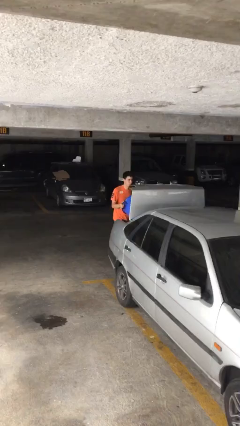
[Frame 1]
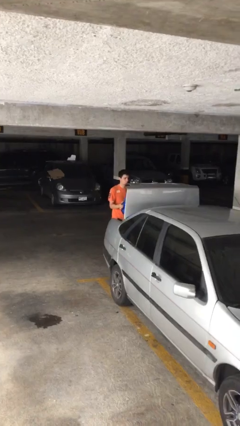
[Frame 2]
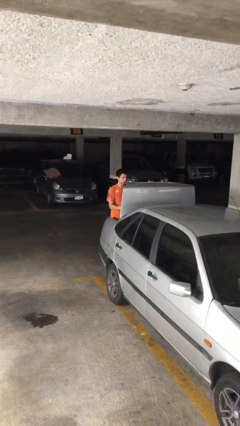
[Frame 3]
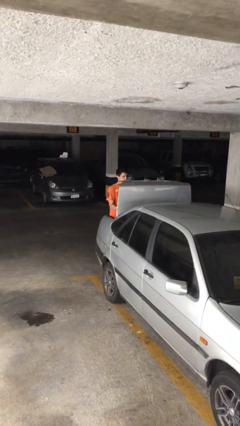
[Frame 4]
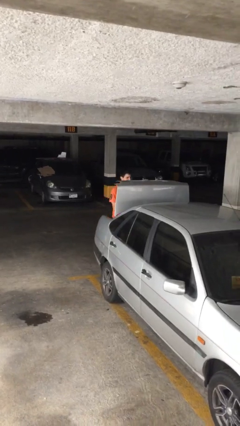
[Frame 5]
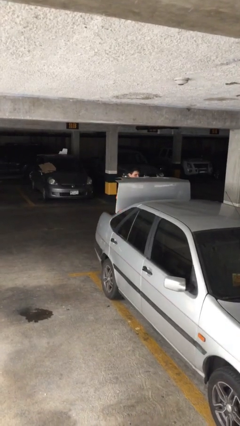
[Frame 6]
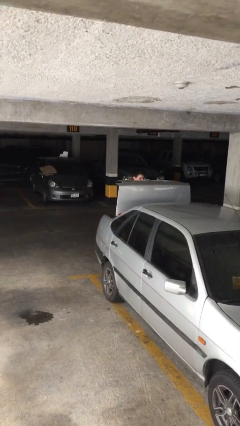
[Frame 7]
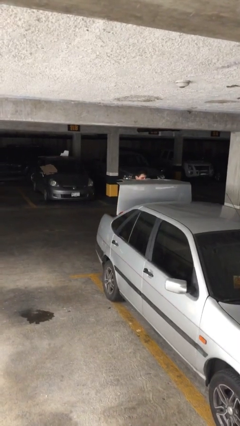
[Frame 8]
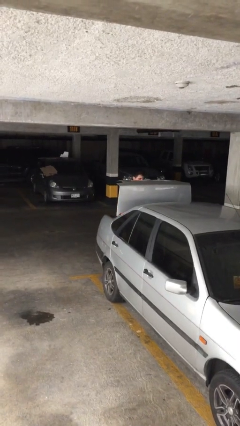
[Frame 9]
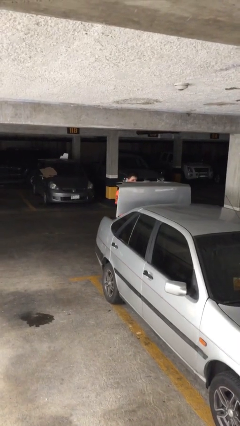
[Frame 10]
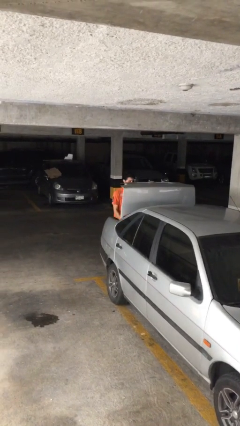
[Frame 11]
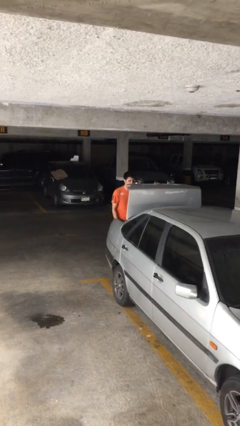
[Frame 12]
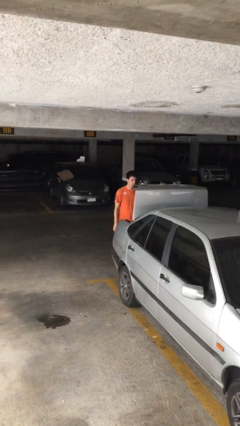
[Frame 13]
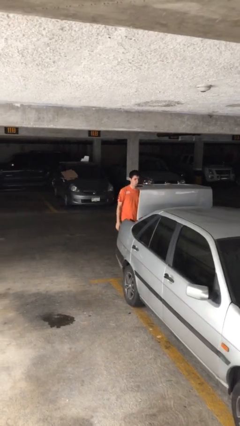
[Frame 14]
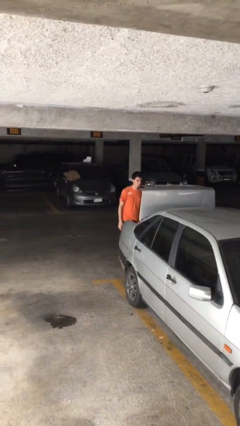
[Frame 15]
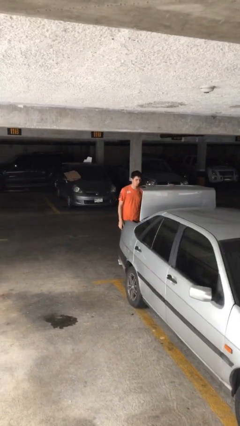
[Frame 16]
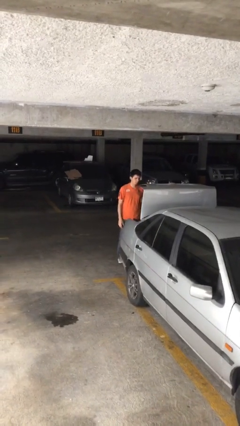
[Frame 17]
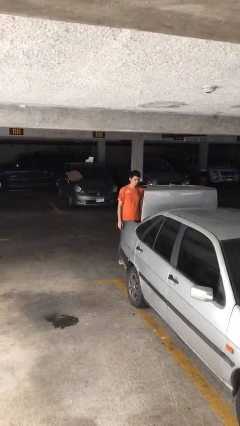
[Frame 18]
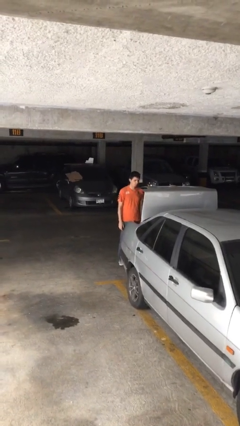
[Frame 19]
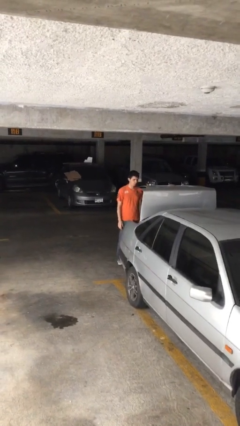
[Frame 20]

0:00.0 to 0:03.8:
person loads car

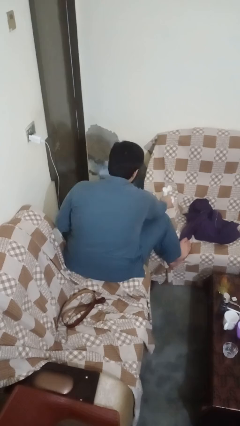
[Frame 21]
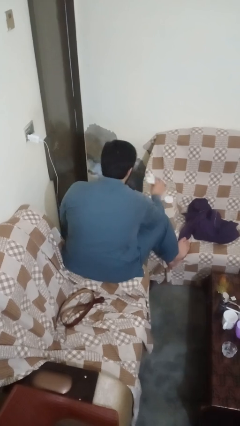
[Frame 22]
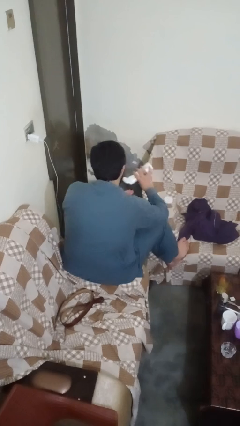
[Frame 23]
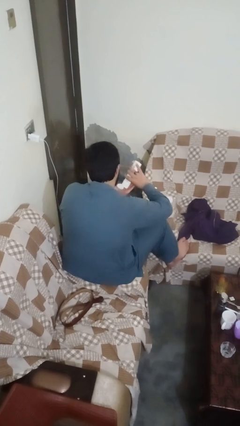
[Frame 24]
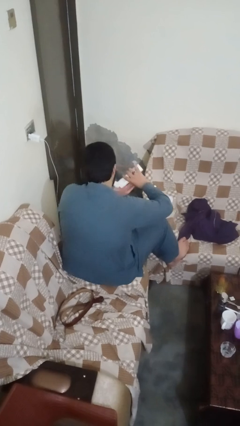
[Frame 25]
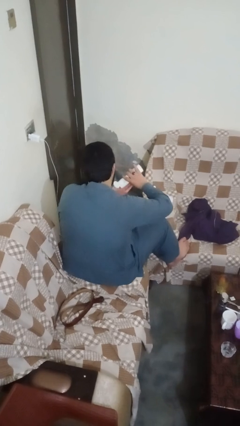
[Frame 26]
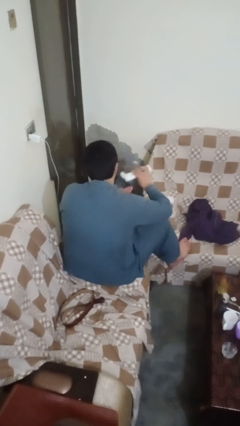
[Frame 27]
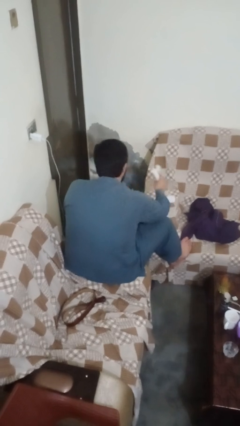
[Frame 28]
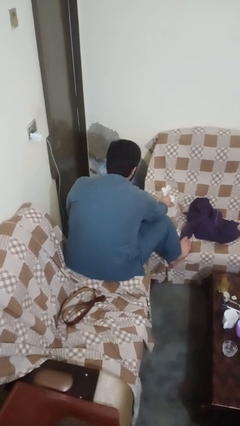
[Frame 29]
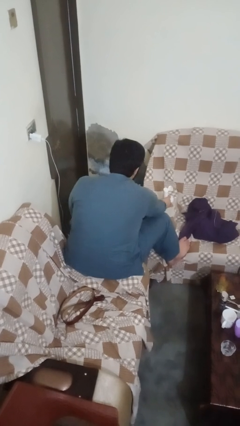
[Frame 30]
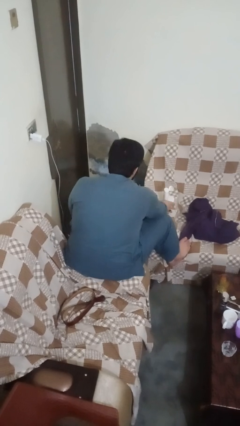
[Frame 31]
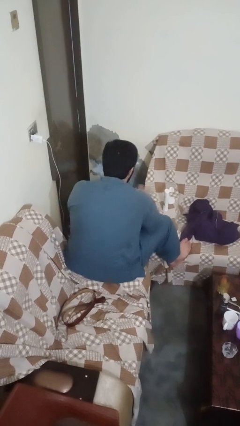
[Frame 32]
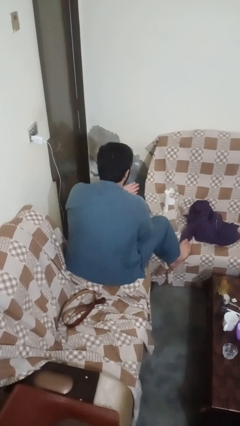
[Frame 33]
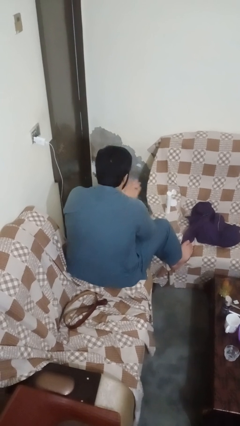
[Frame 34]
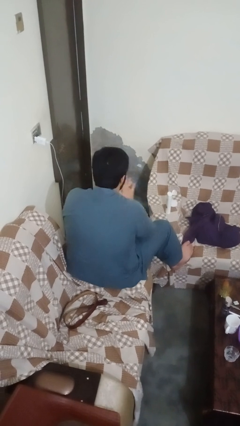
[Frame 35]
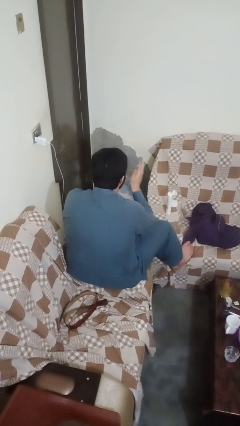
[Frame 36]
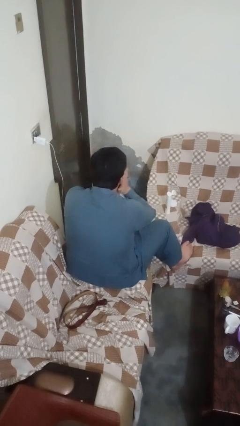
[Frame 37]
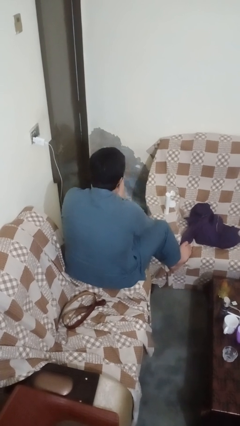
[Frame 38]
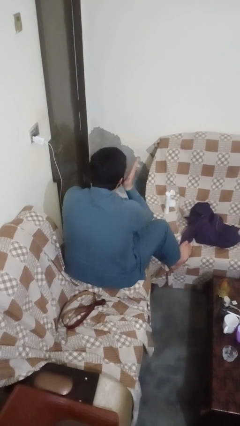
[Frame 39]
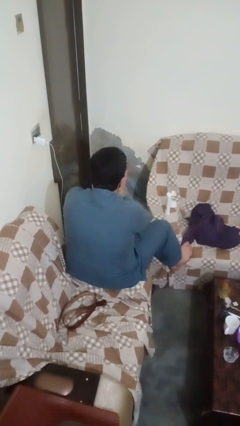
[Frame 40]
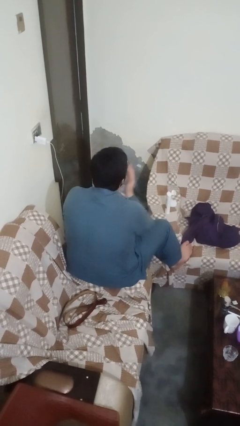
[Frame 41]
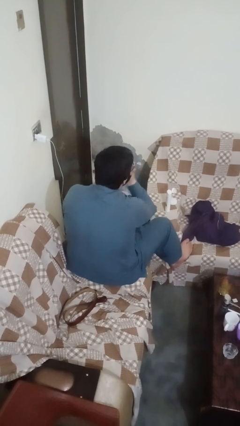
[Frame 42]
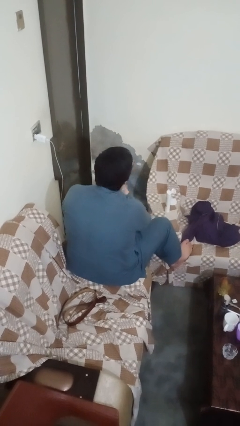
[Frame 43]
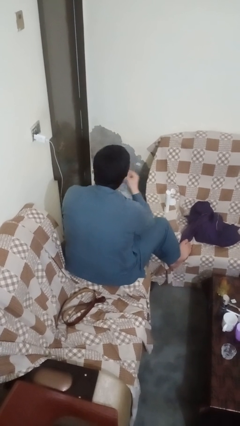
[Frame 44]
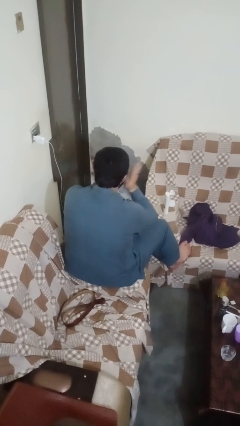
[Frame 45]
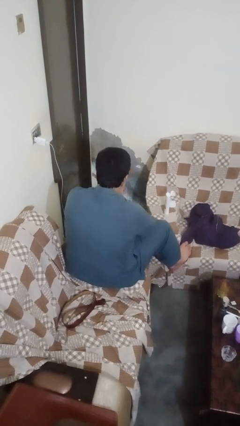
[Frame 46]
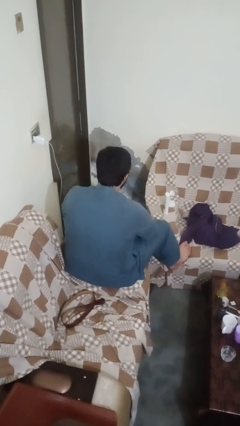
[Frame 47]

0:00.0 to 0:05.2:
person applies facial moisturizer

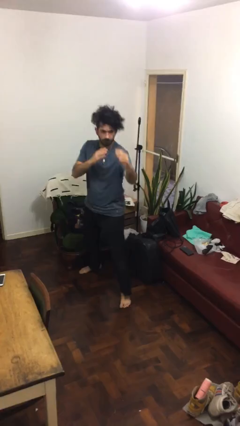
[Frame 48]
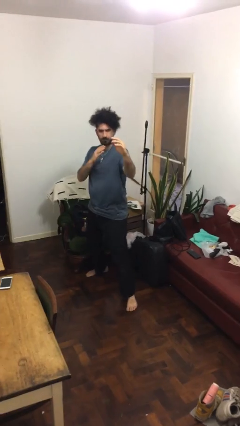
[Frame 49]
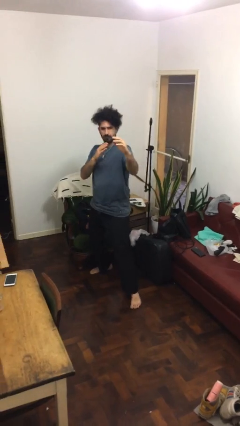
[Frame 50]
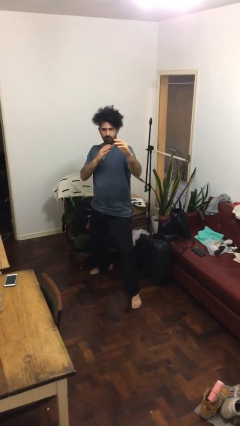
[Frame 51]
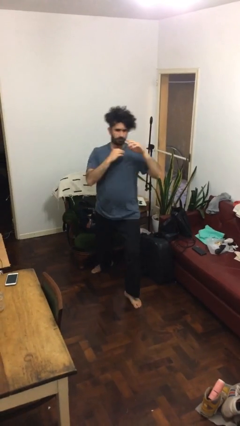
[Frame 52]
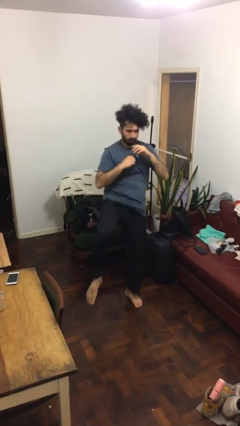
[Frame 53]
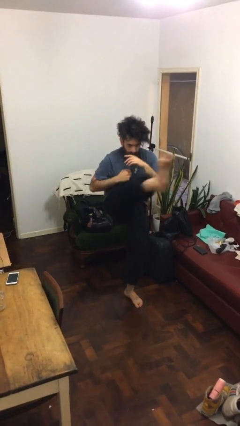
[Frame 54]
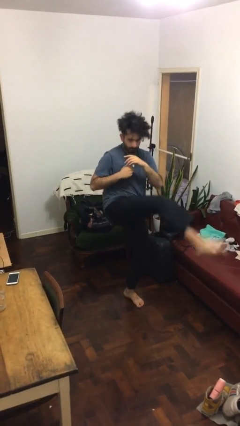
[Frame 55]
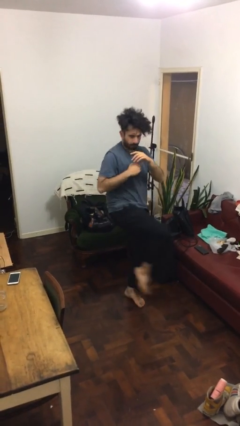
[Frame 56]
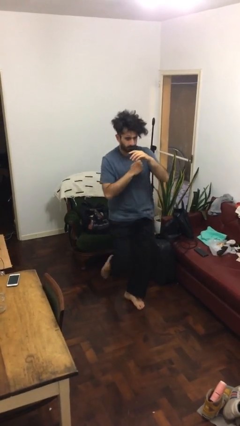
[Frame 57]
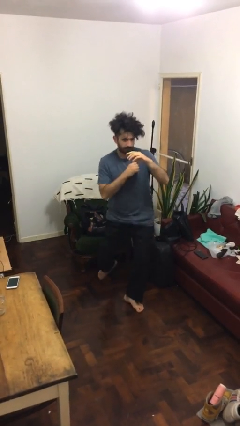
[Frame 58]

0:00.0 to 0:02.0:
person karate kicks

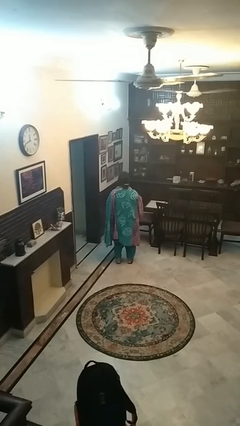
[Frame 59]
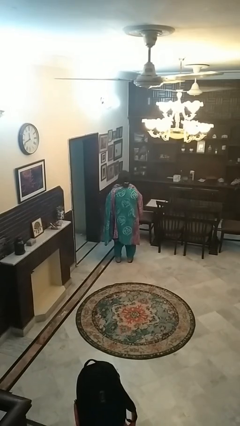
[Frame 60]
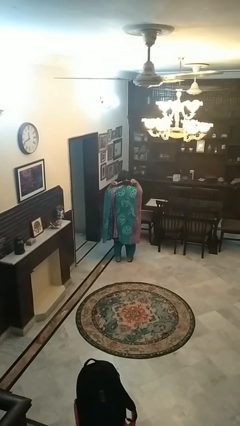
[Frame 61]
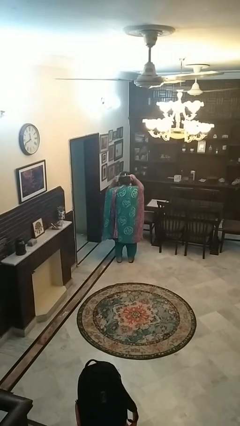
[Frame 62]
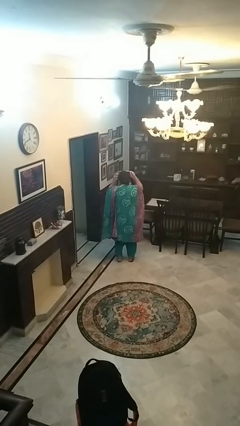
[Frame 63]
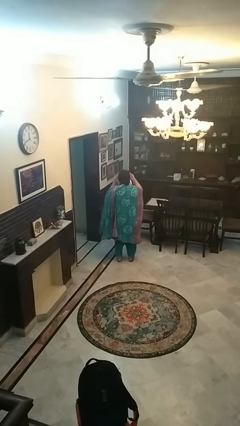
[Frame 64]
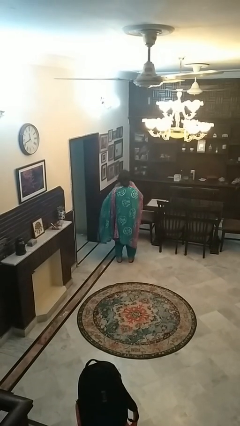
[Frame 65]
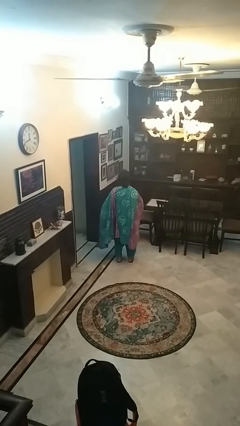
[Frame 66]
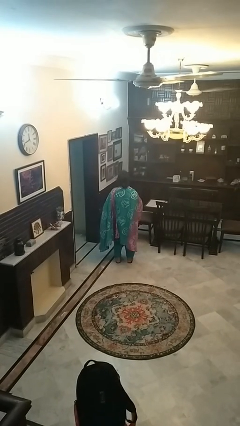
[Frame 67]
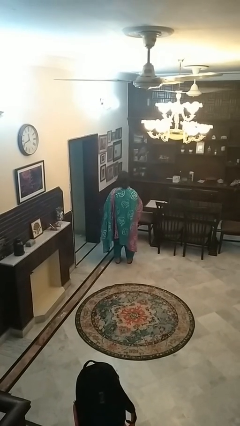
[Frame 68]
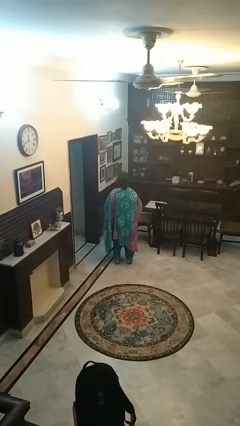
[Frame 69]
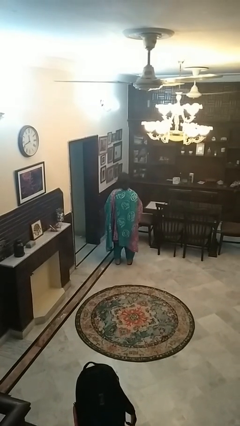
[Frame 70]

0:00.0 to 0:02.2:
person takes off apron

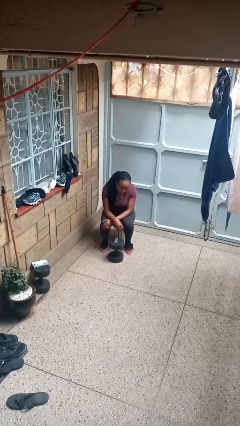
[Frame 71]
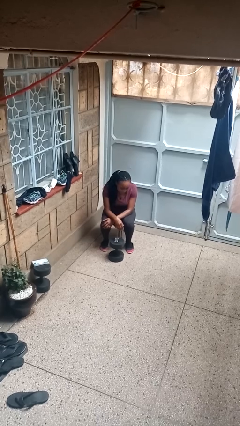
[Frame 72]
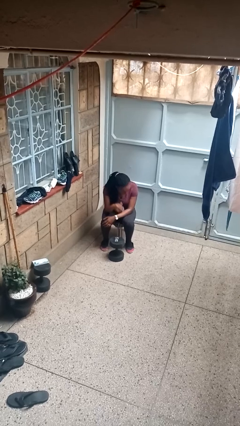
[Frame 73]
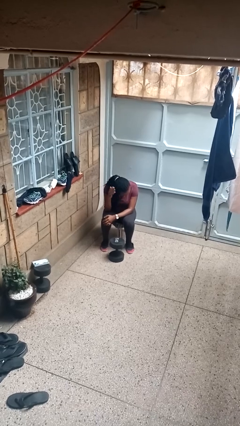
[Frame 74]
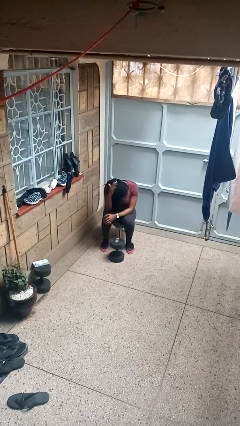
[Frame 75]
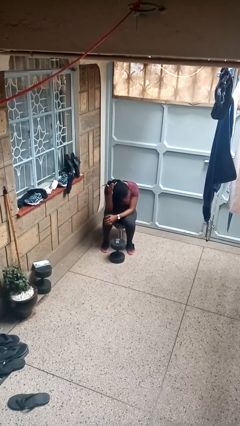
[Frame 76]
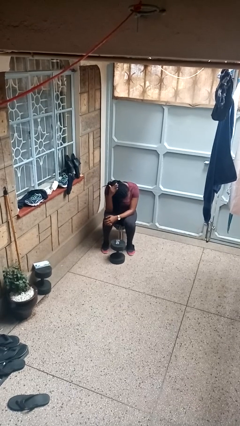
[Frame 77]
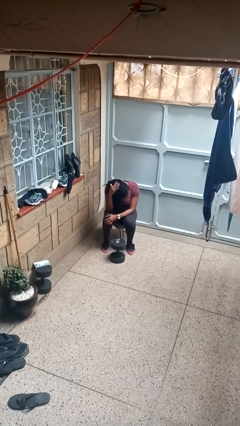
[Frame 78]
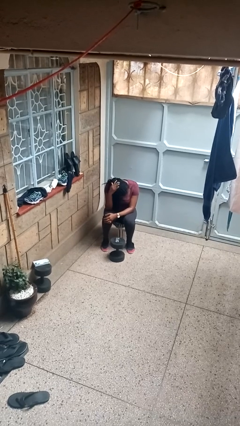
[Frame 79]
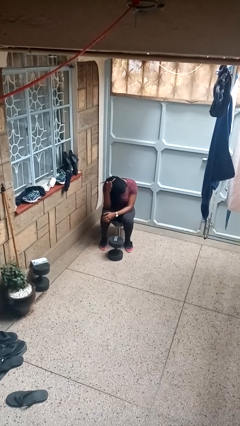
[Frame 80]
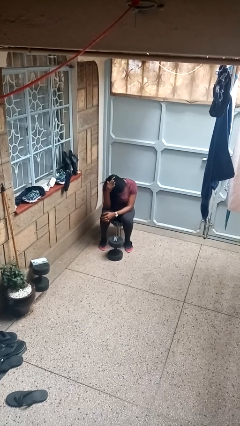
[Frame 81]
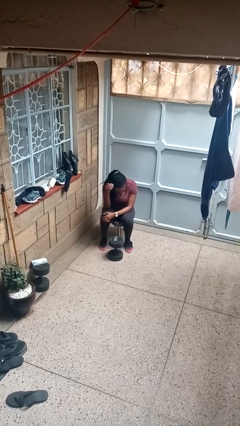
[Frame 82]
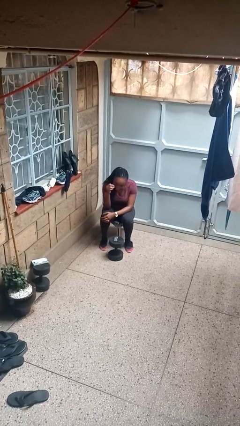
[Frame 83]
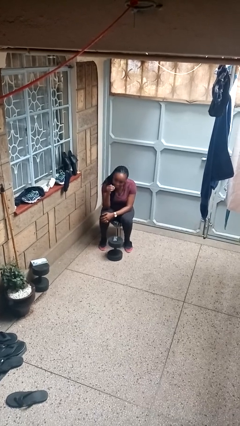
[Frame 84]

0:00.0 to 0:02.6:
person pats head

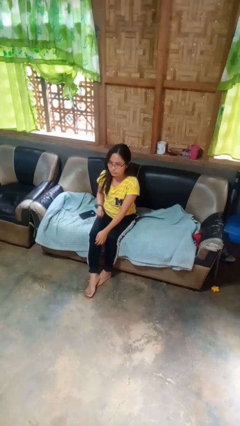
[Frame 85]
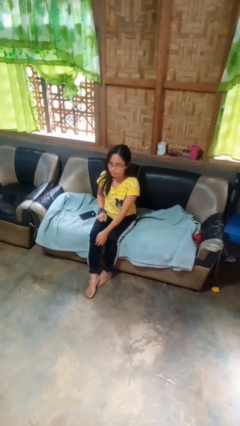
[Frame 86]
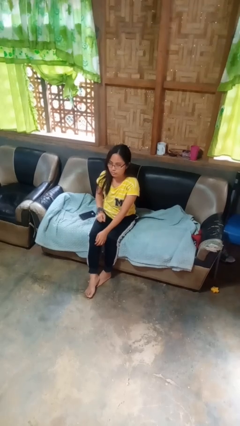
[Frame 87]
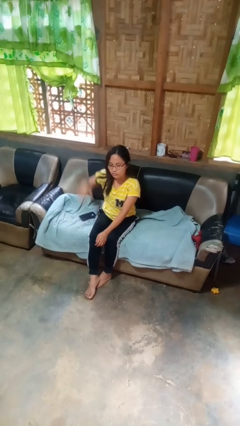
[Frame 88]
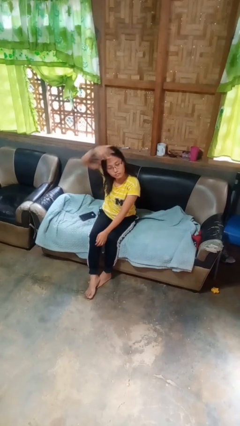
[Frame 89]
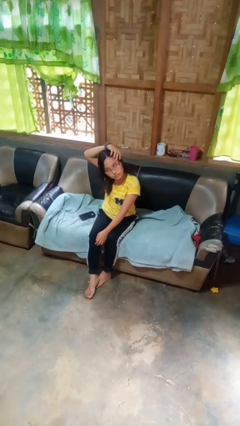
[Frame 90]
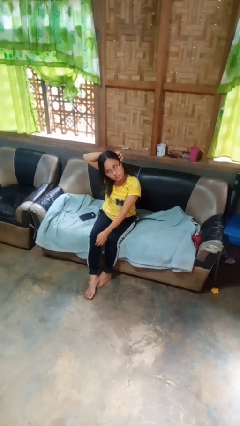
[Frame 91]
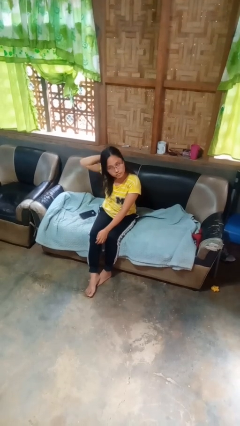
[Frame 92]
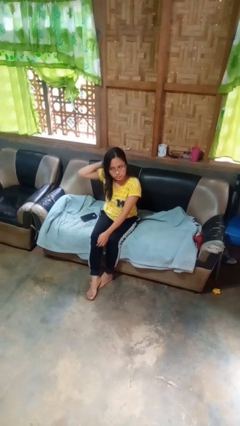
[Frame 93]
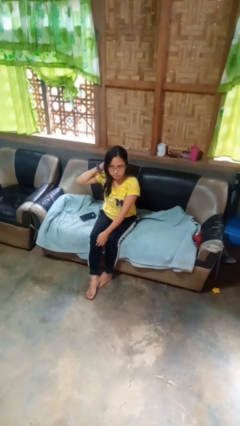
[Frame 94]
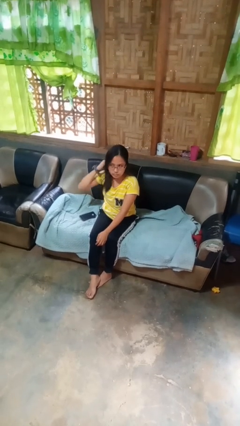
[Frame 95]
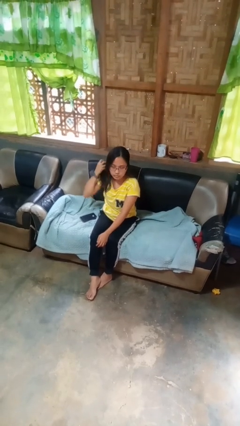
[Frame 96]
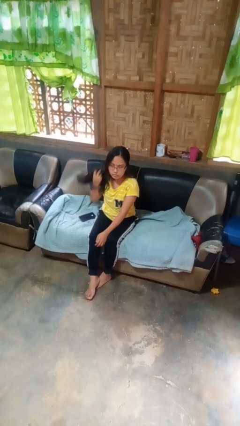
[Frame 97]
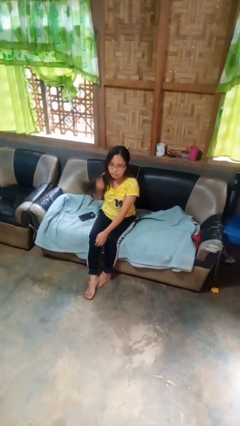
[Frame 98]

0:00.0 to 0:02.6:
person strokes hair
